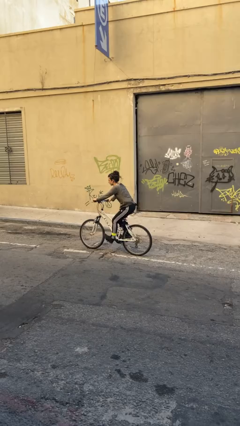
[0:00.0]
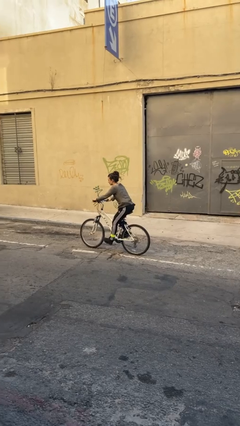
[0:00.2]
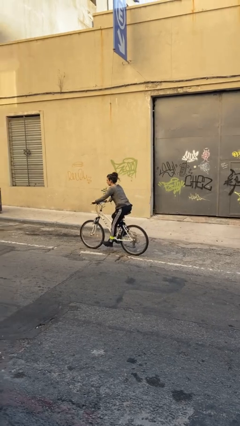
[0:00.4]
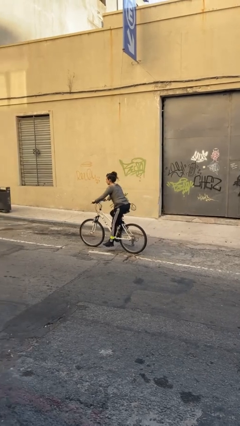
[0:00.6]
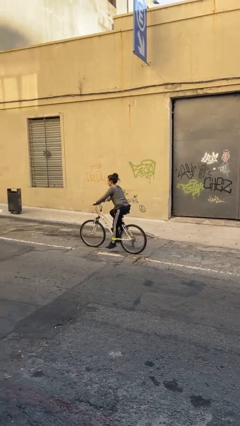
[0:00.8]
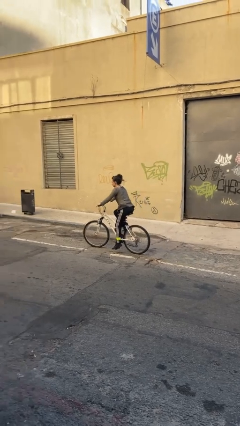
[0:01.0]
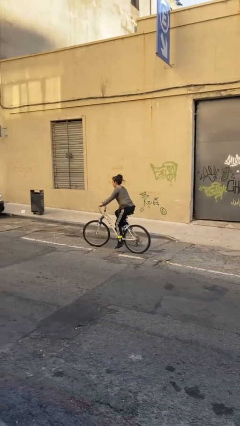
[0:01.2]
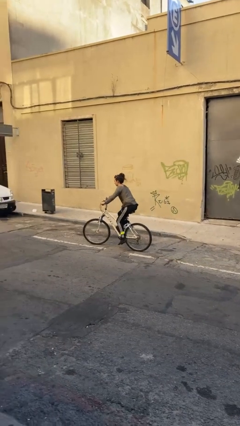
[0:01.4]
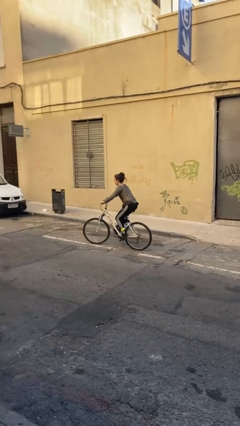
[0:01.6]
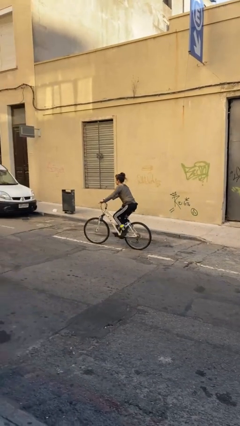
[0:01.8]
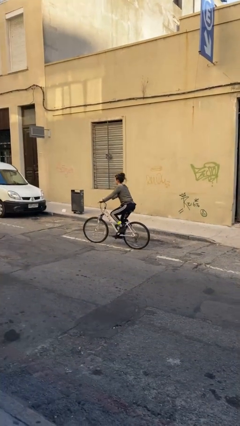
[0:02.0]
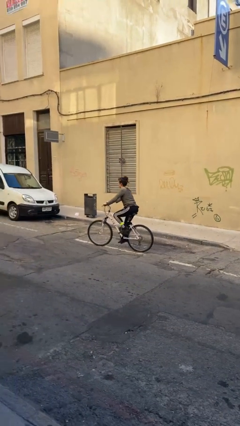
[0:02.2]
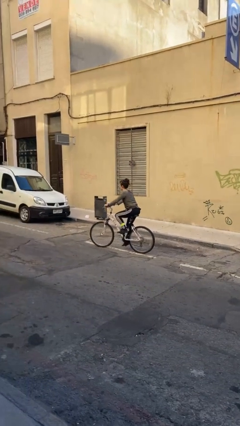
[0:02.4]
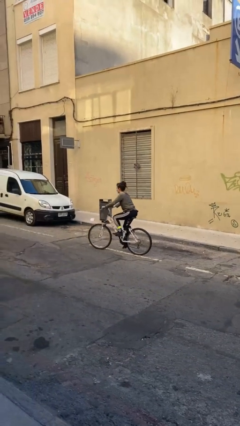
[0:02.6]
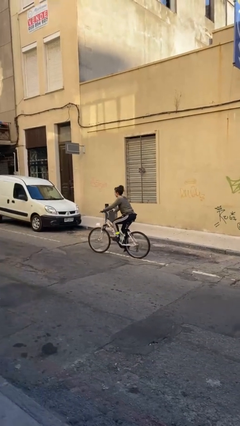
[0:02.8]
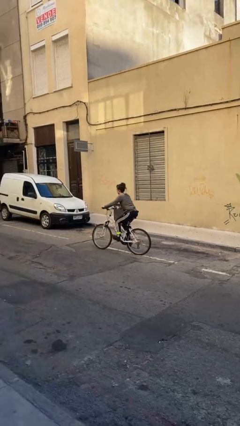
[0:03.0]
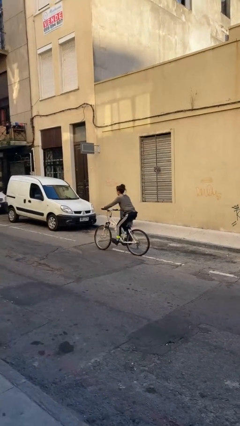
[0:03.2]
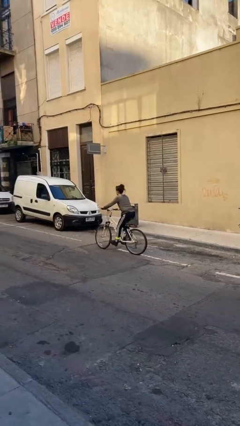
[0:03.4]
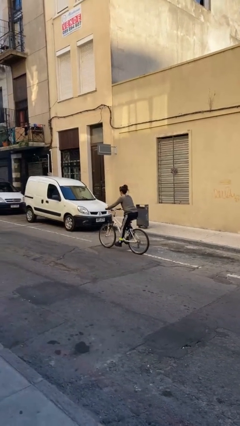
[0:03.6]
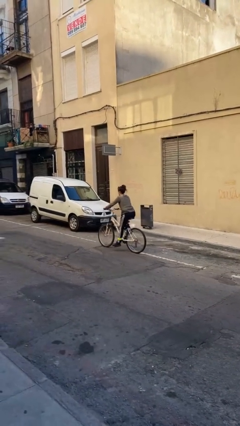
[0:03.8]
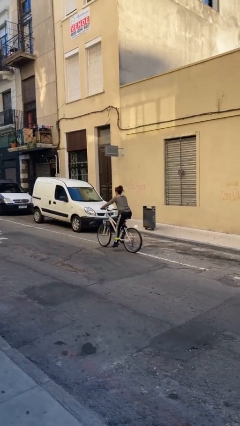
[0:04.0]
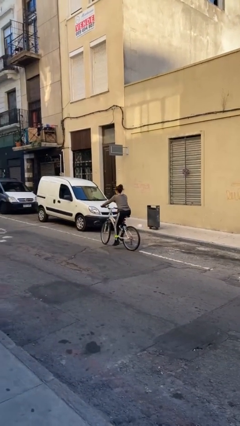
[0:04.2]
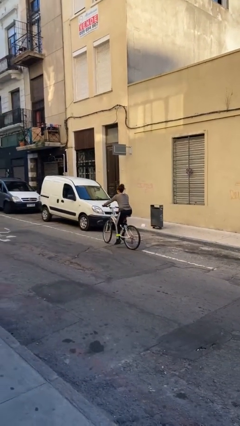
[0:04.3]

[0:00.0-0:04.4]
person rides bicycle

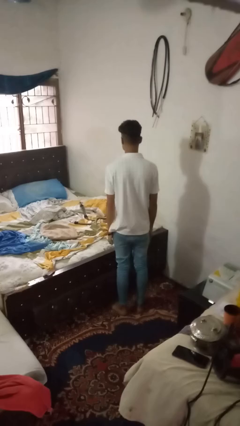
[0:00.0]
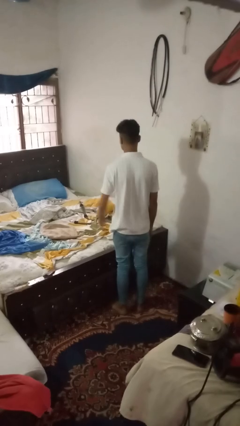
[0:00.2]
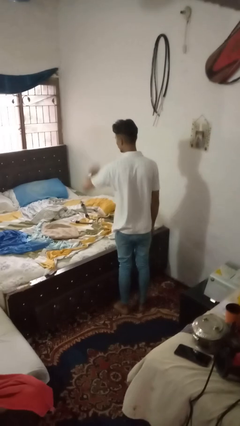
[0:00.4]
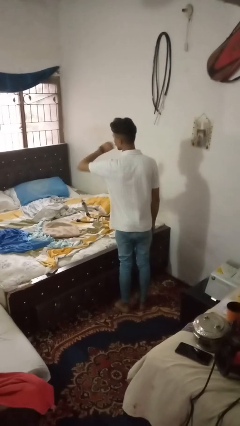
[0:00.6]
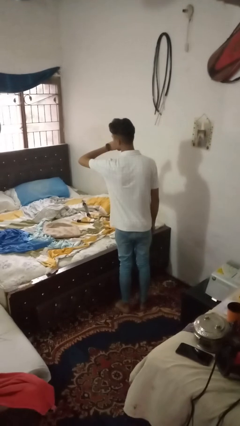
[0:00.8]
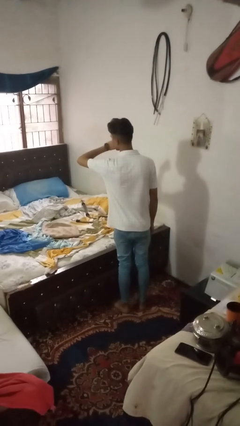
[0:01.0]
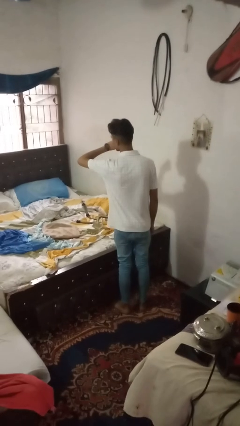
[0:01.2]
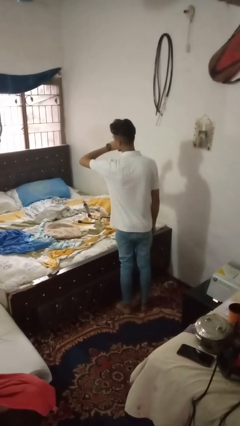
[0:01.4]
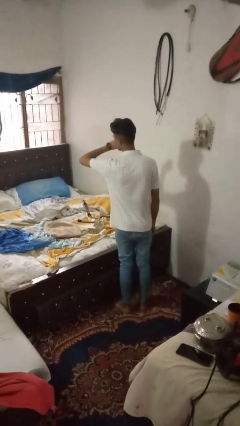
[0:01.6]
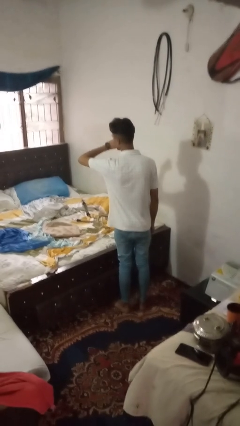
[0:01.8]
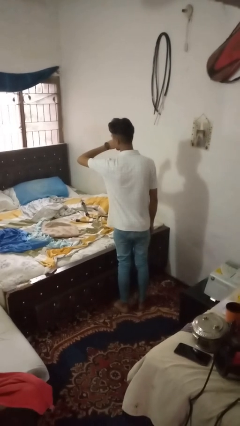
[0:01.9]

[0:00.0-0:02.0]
person gestures watch closely

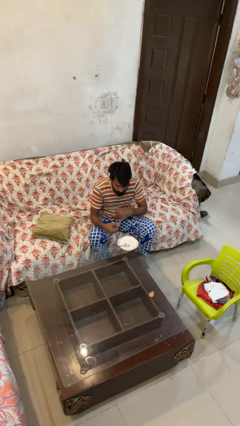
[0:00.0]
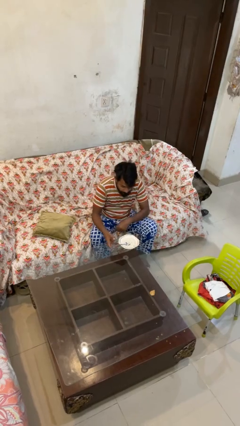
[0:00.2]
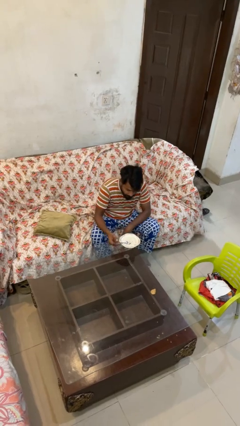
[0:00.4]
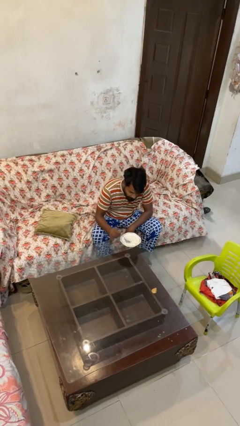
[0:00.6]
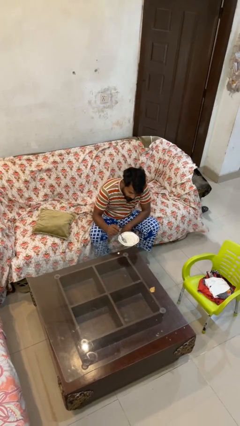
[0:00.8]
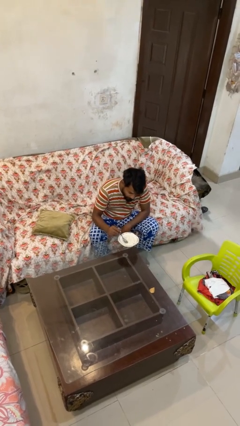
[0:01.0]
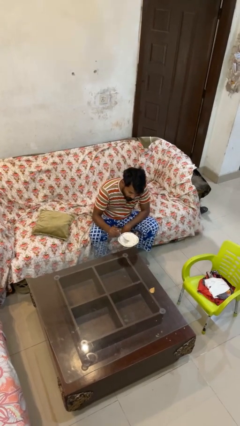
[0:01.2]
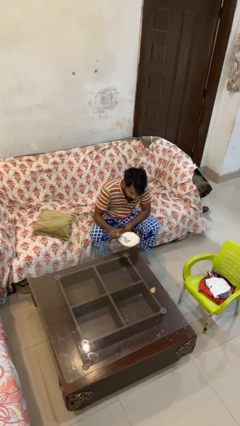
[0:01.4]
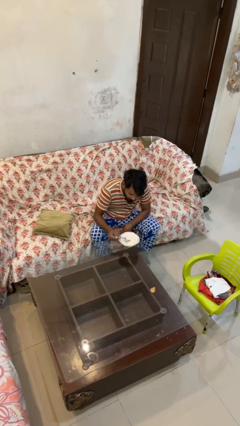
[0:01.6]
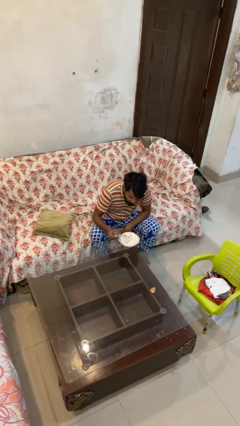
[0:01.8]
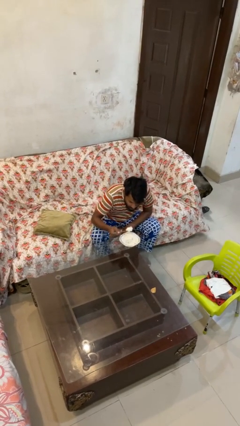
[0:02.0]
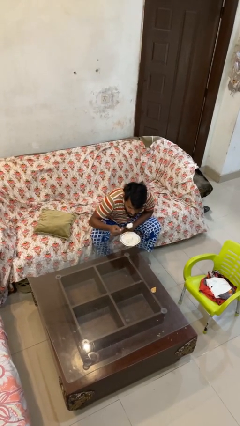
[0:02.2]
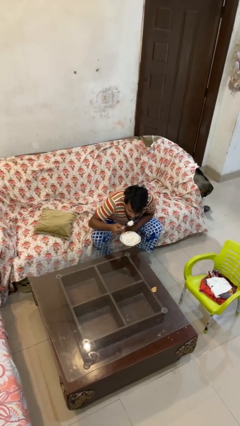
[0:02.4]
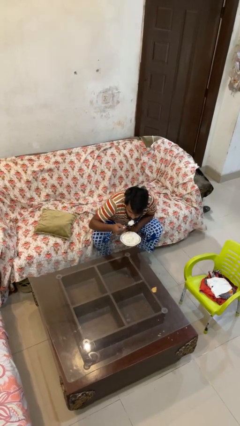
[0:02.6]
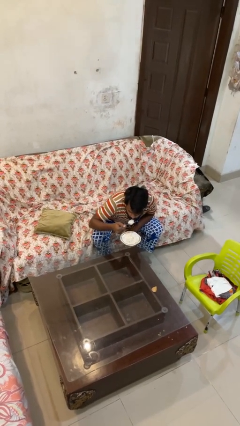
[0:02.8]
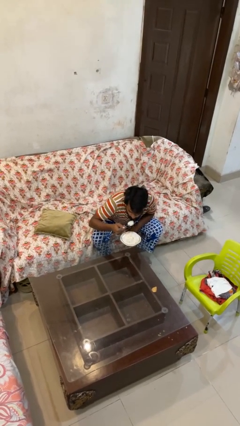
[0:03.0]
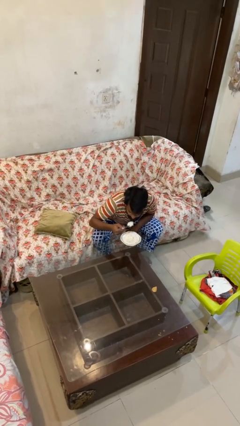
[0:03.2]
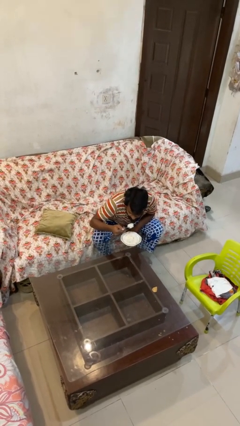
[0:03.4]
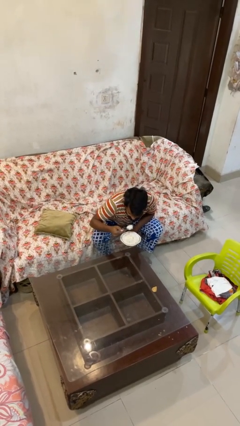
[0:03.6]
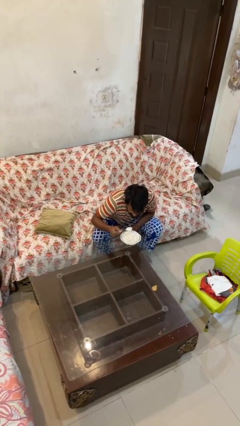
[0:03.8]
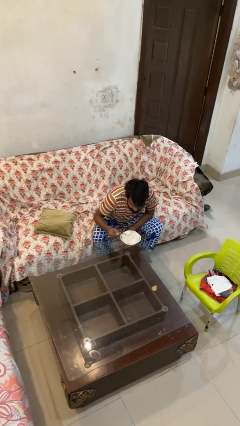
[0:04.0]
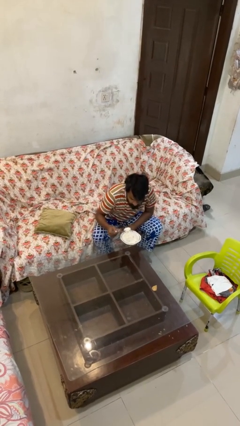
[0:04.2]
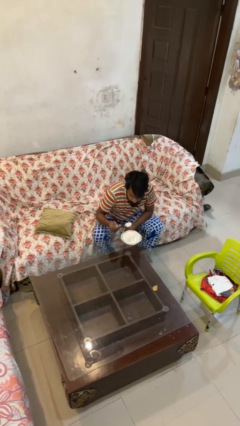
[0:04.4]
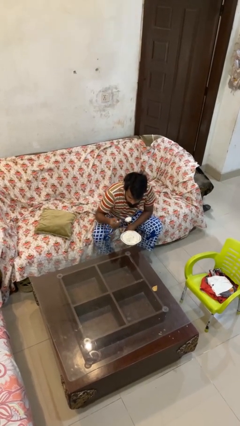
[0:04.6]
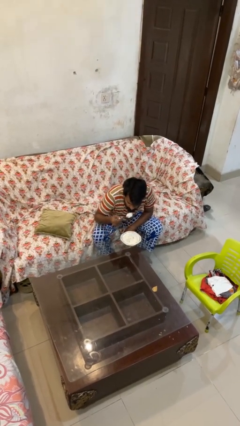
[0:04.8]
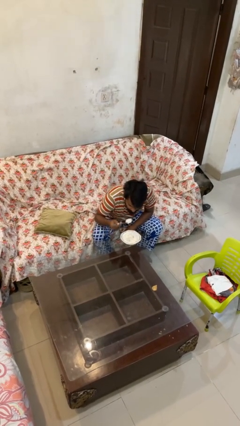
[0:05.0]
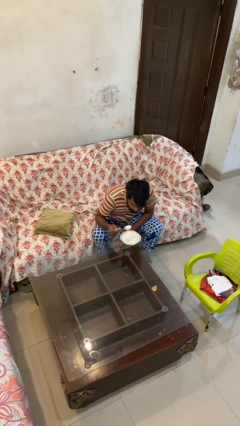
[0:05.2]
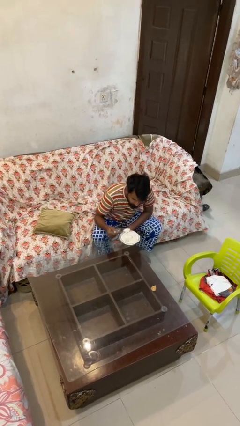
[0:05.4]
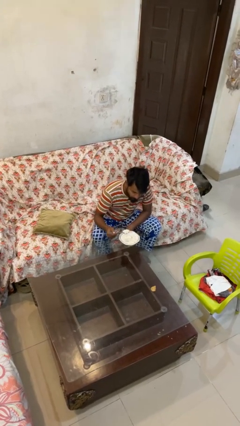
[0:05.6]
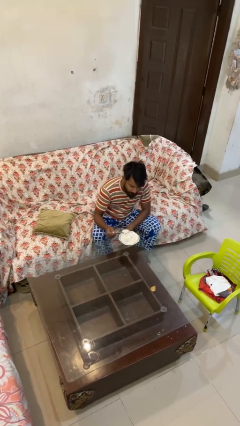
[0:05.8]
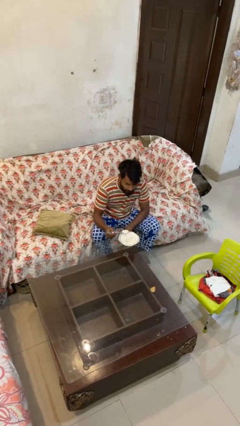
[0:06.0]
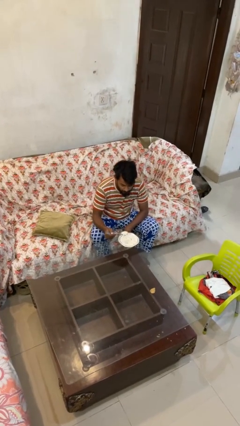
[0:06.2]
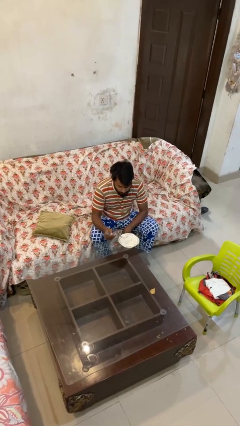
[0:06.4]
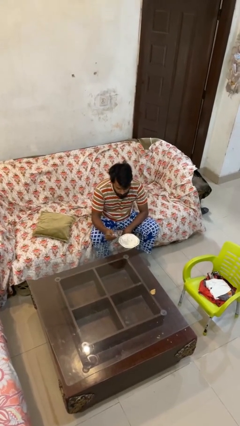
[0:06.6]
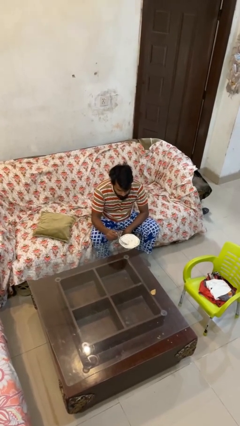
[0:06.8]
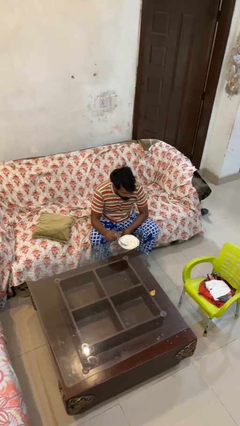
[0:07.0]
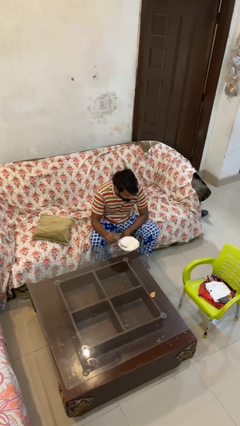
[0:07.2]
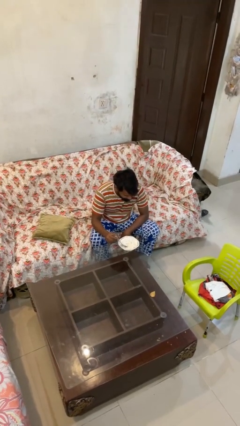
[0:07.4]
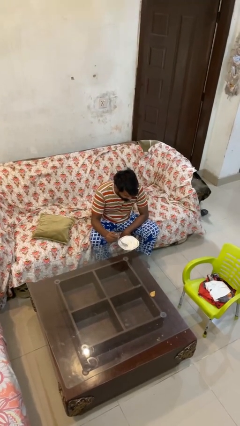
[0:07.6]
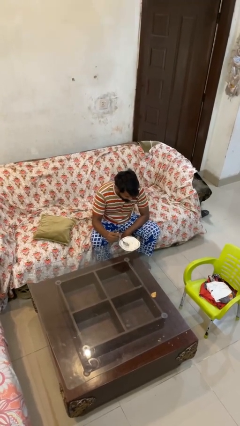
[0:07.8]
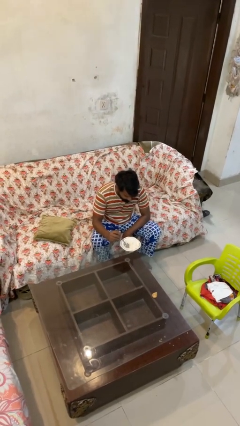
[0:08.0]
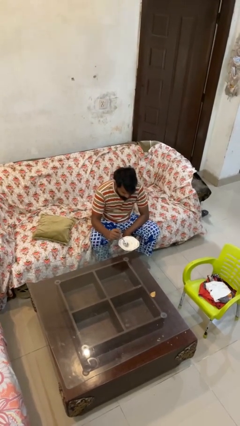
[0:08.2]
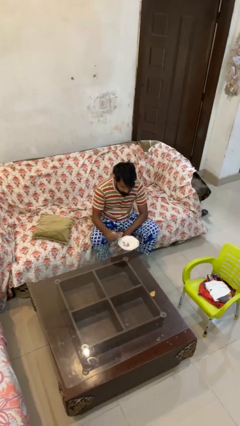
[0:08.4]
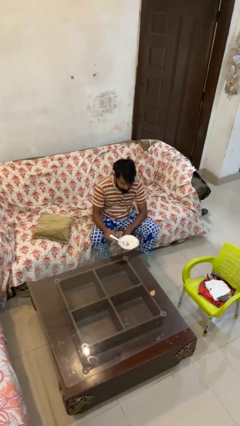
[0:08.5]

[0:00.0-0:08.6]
person eats with utensil

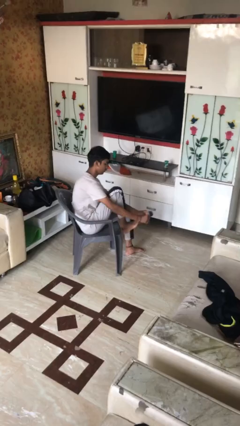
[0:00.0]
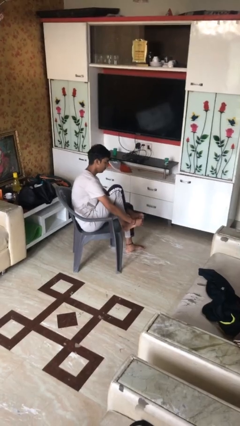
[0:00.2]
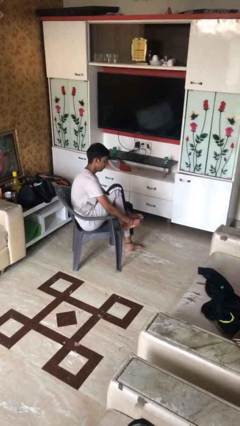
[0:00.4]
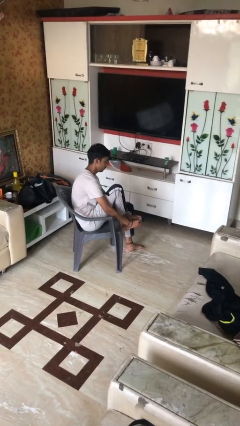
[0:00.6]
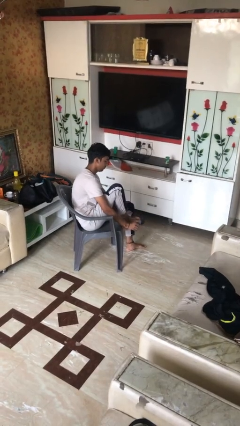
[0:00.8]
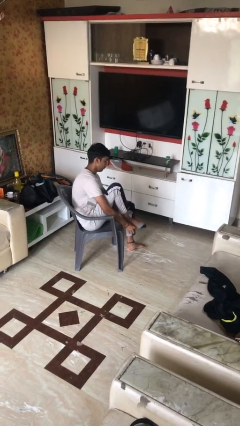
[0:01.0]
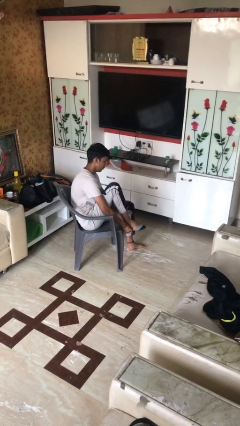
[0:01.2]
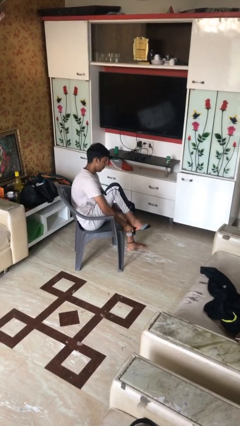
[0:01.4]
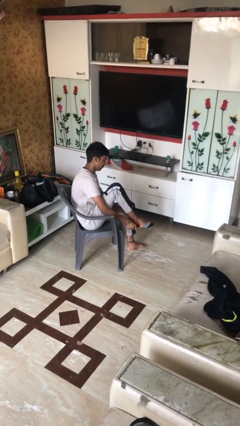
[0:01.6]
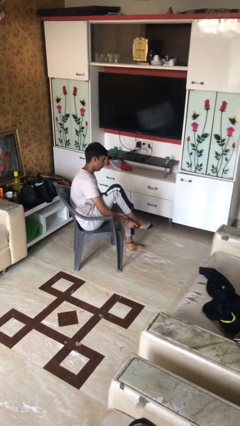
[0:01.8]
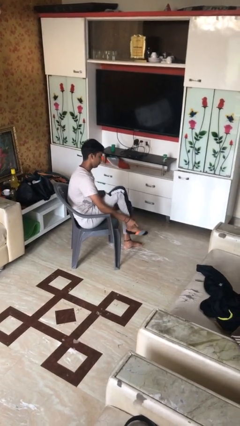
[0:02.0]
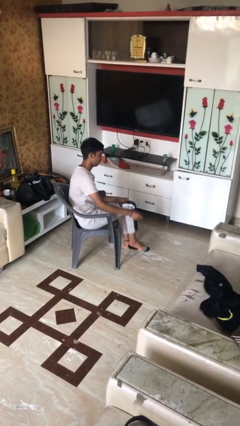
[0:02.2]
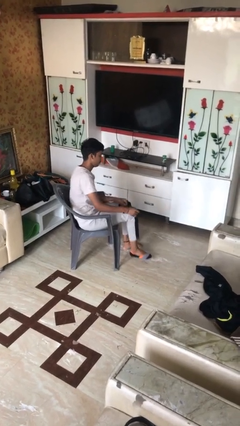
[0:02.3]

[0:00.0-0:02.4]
person puts on socks

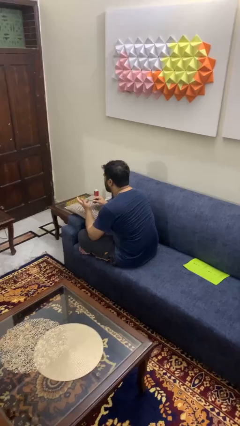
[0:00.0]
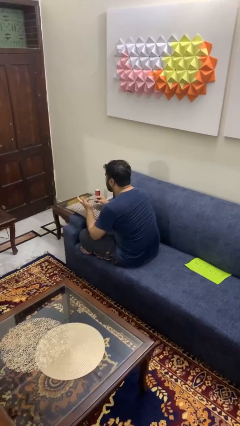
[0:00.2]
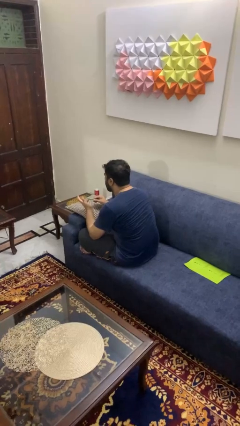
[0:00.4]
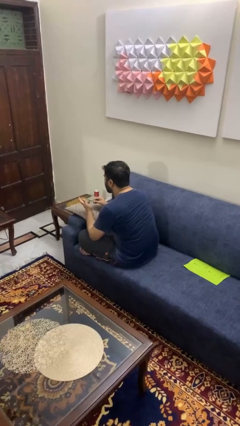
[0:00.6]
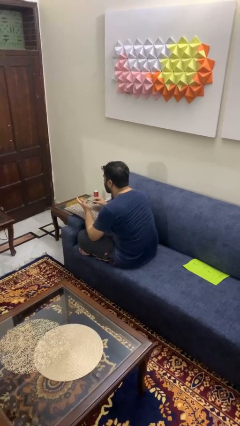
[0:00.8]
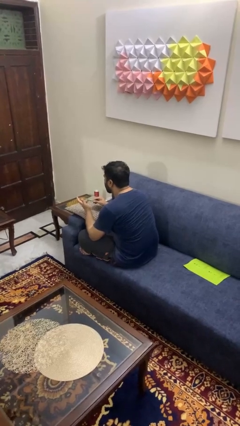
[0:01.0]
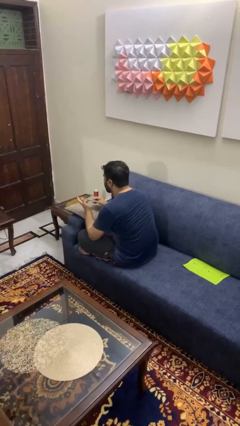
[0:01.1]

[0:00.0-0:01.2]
person files fingernails
